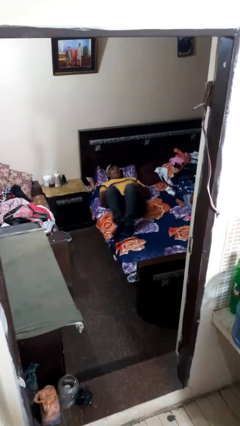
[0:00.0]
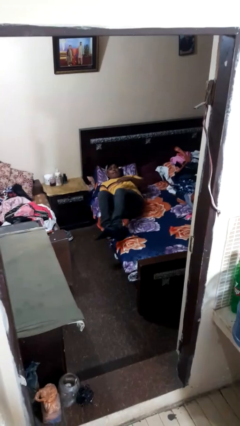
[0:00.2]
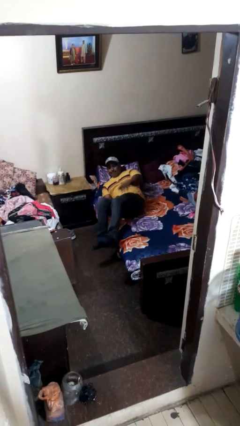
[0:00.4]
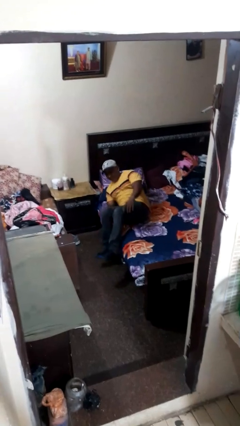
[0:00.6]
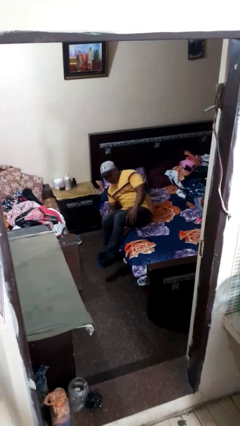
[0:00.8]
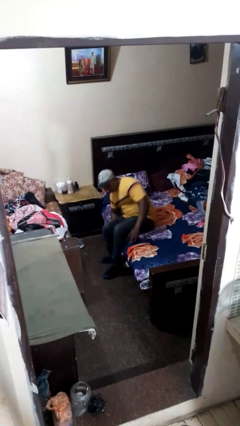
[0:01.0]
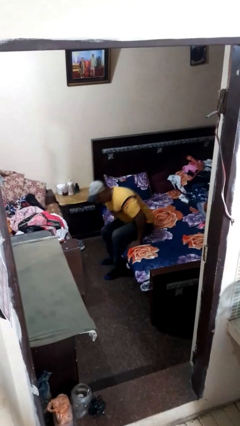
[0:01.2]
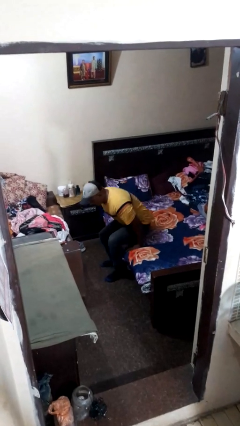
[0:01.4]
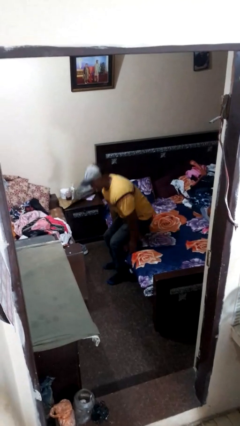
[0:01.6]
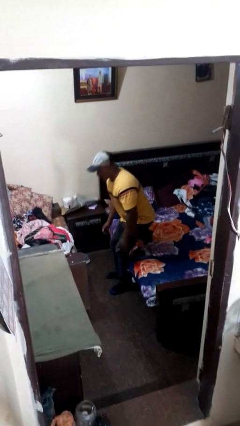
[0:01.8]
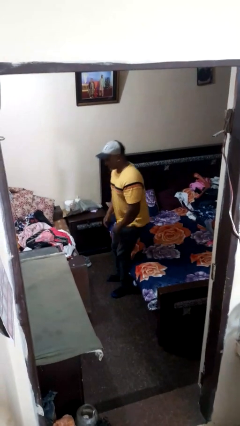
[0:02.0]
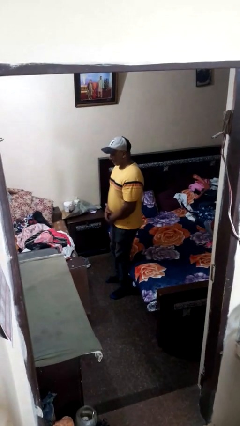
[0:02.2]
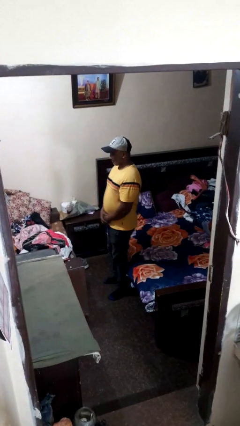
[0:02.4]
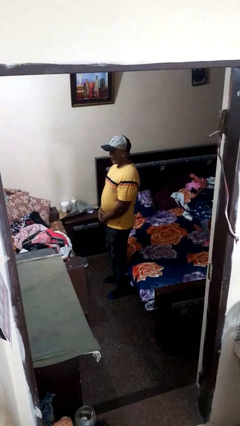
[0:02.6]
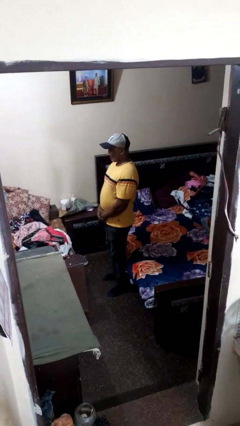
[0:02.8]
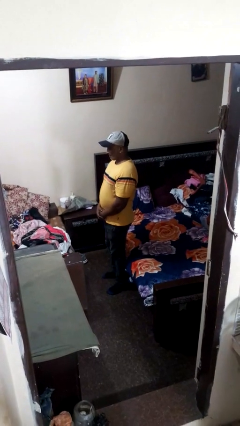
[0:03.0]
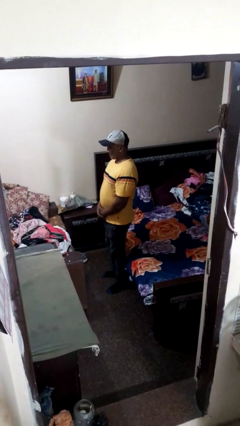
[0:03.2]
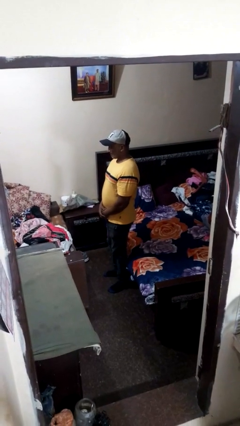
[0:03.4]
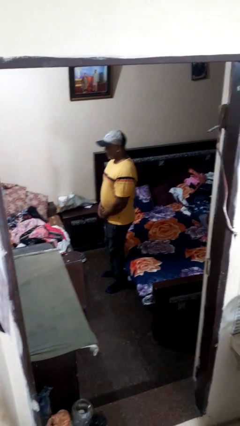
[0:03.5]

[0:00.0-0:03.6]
person stands up

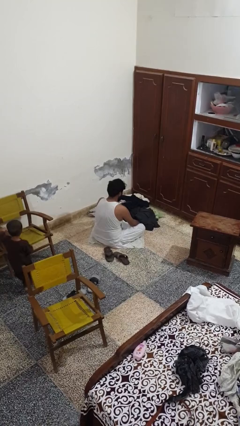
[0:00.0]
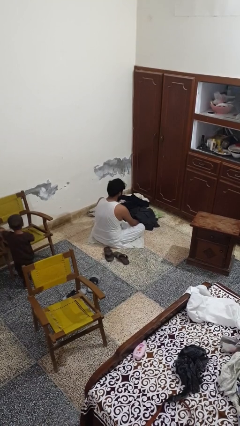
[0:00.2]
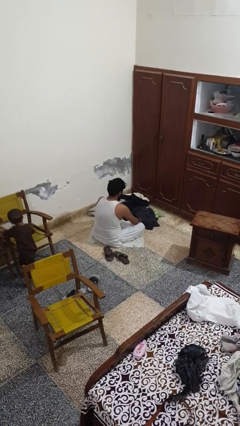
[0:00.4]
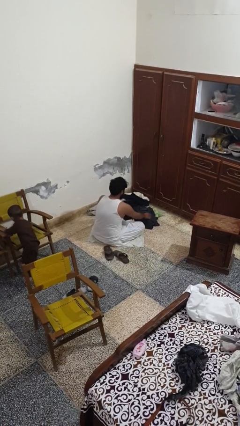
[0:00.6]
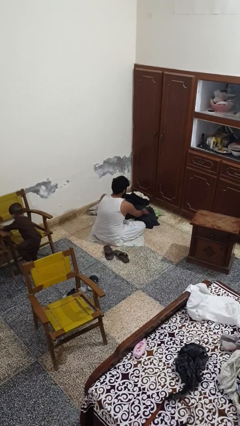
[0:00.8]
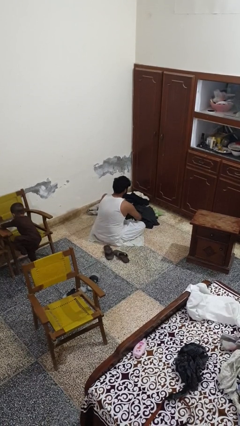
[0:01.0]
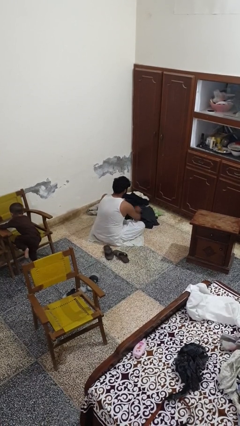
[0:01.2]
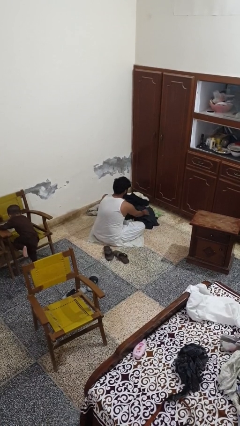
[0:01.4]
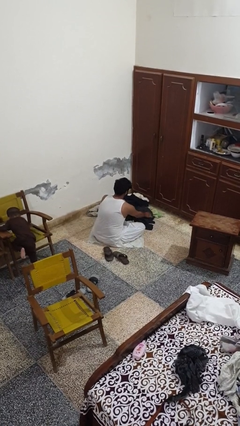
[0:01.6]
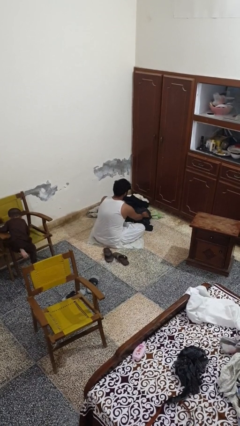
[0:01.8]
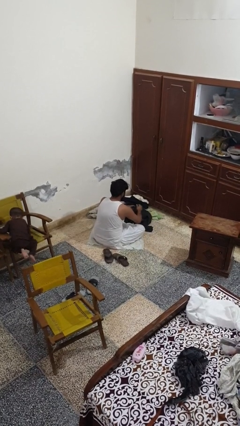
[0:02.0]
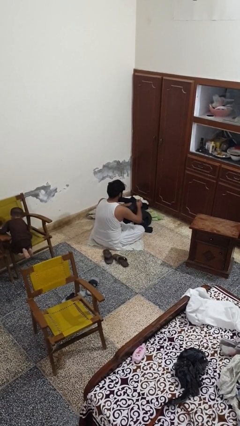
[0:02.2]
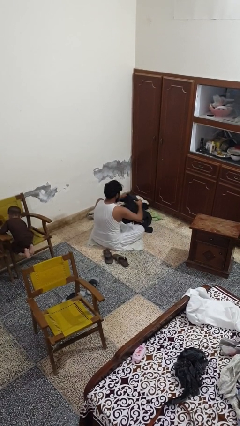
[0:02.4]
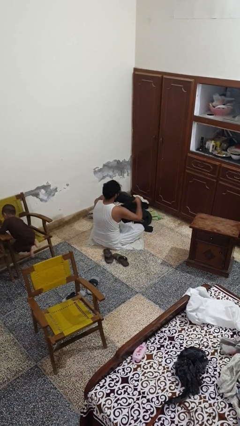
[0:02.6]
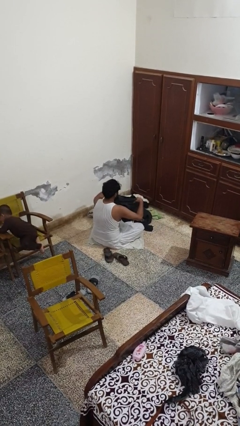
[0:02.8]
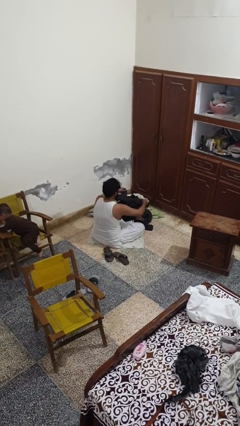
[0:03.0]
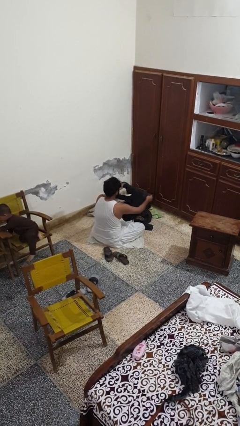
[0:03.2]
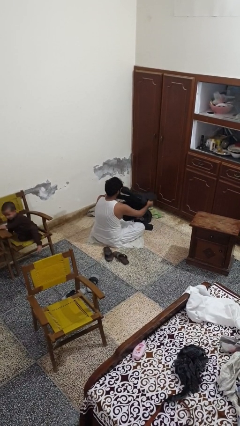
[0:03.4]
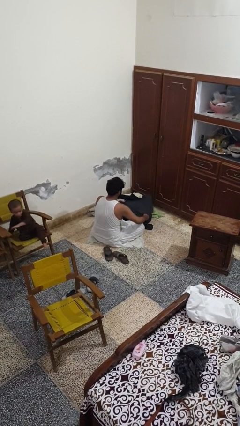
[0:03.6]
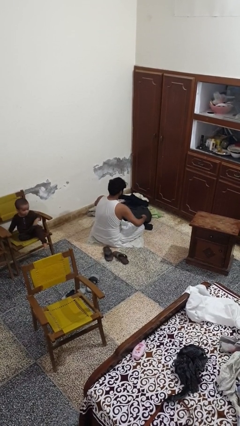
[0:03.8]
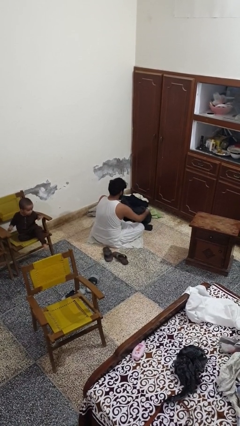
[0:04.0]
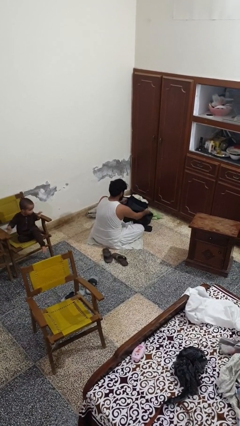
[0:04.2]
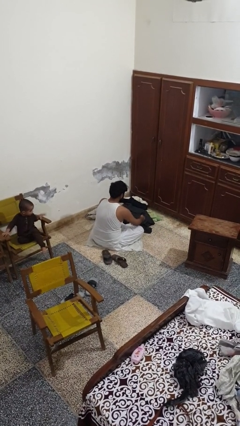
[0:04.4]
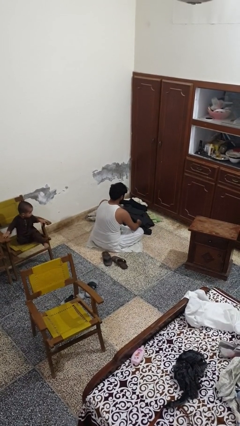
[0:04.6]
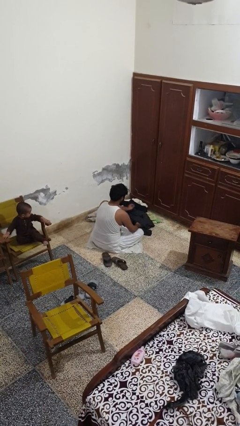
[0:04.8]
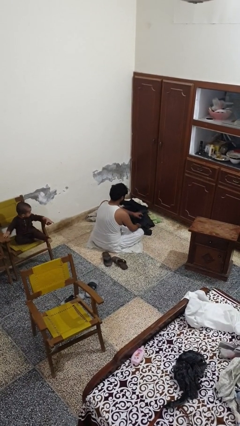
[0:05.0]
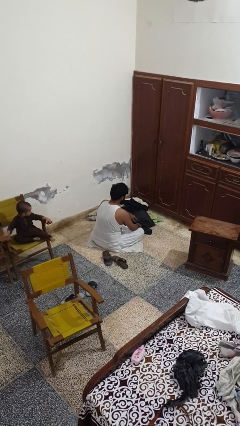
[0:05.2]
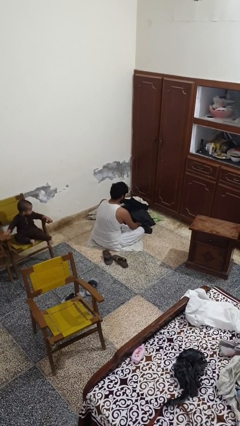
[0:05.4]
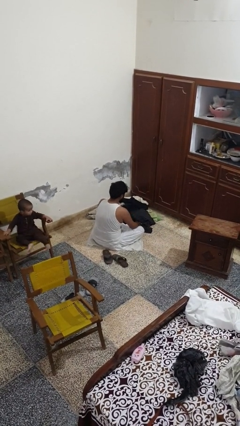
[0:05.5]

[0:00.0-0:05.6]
person folds shirt

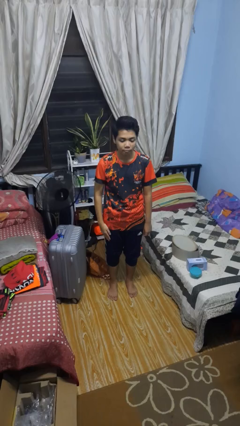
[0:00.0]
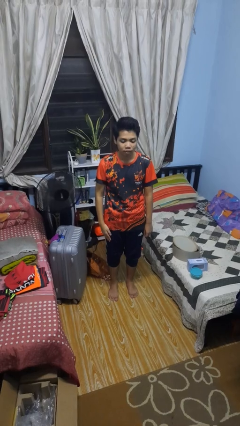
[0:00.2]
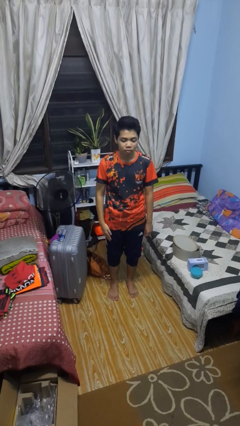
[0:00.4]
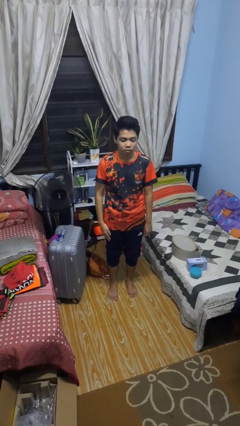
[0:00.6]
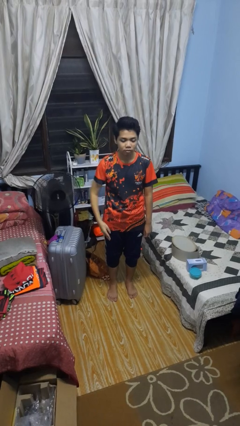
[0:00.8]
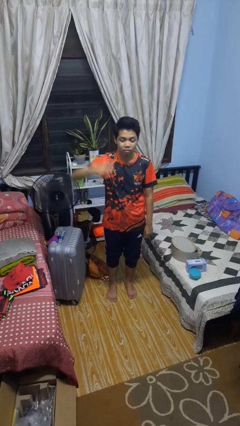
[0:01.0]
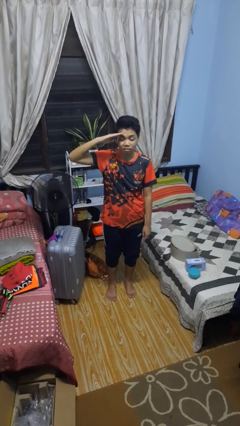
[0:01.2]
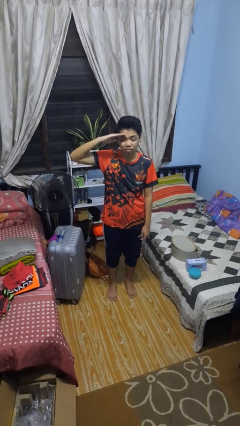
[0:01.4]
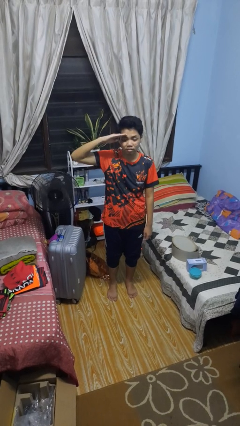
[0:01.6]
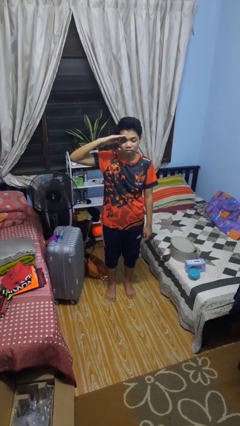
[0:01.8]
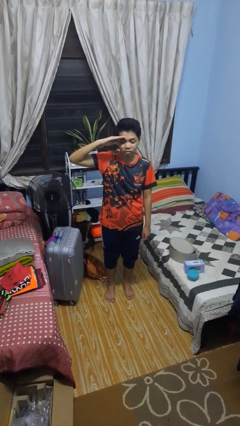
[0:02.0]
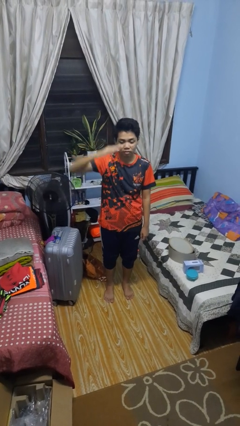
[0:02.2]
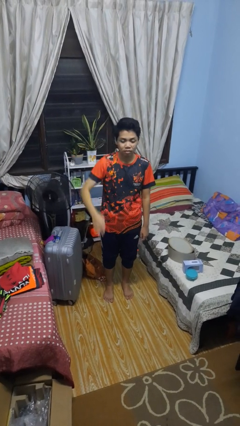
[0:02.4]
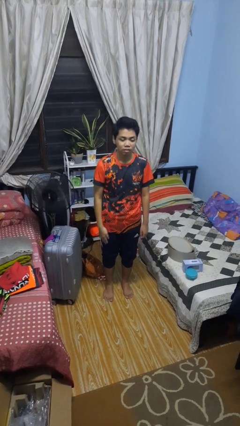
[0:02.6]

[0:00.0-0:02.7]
person salutes

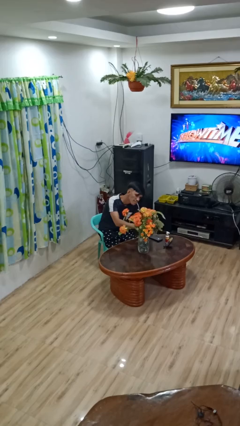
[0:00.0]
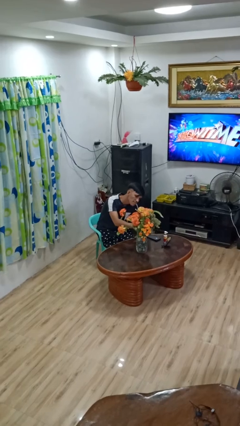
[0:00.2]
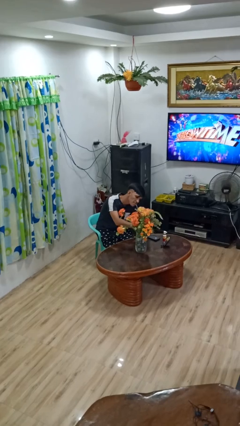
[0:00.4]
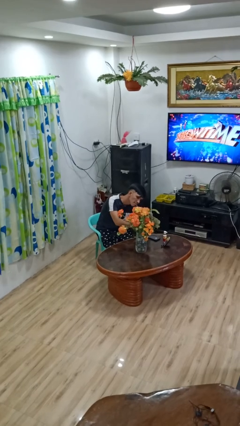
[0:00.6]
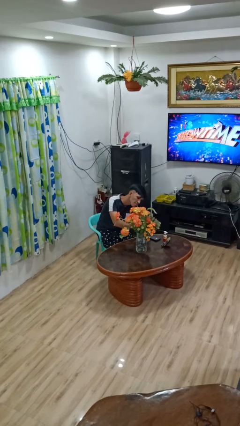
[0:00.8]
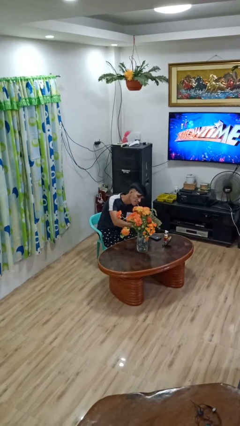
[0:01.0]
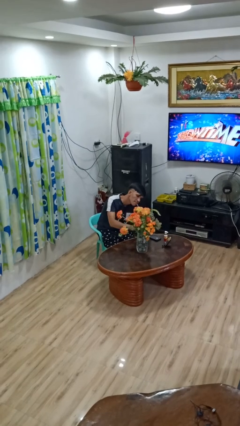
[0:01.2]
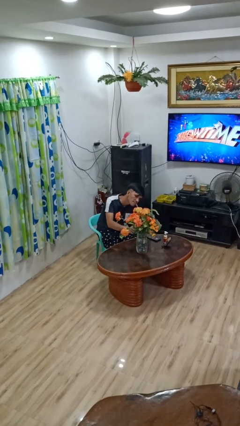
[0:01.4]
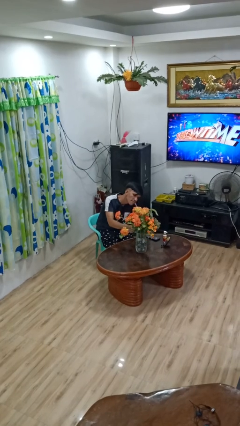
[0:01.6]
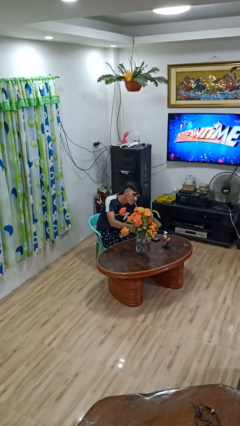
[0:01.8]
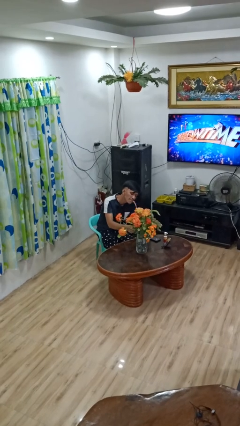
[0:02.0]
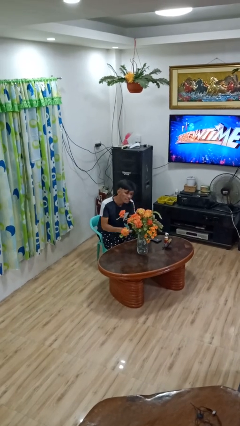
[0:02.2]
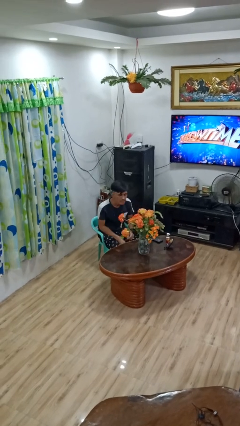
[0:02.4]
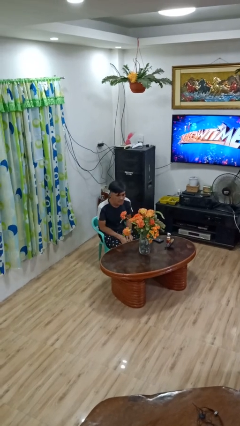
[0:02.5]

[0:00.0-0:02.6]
person arranges flowers in vase

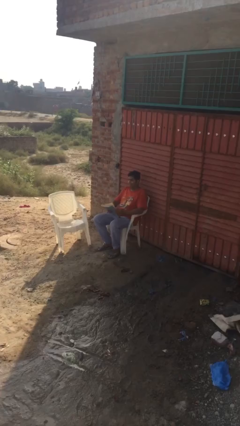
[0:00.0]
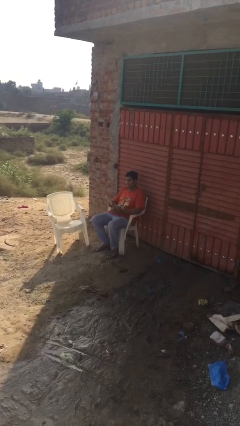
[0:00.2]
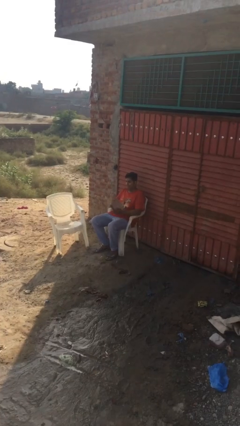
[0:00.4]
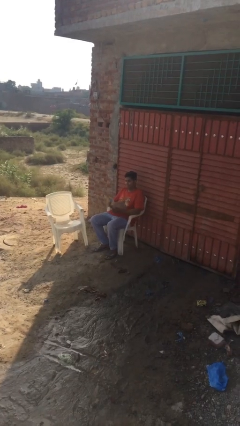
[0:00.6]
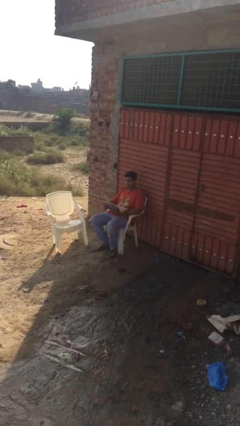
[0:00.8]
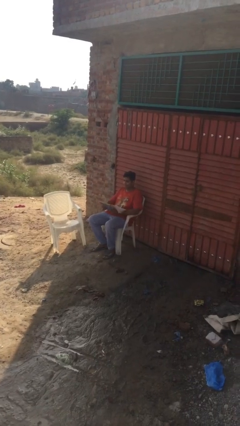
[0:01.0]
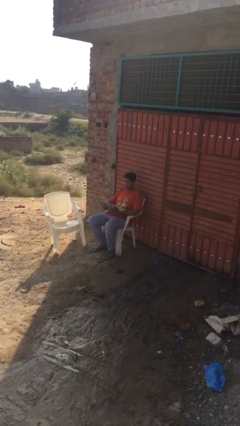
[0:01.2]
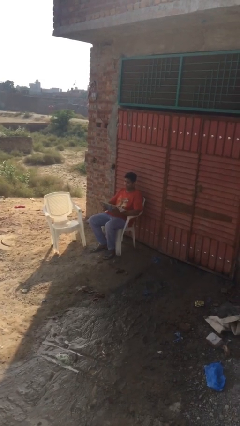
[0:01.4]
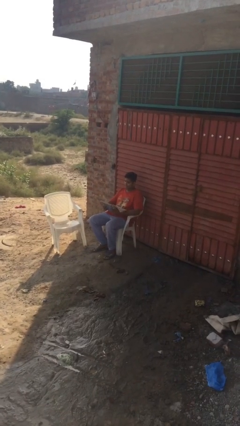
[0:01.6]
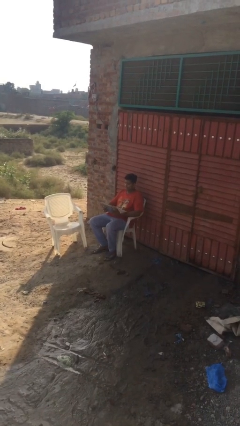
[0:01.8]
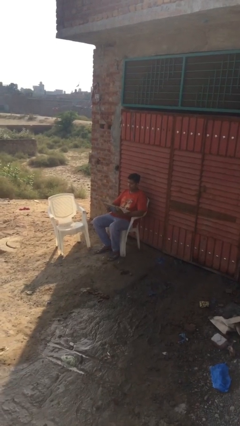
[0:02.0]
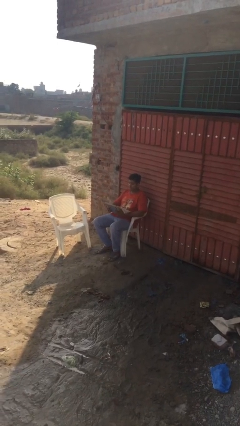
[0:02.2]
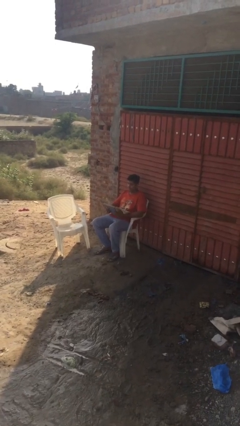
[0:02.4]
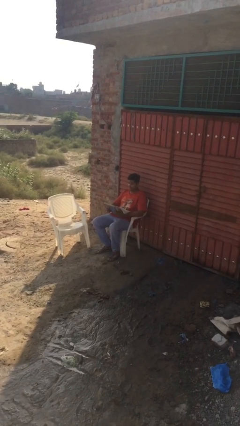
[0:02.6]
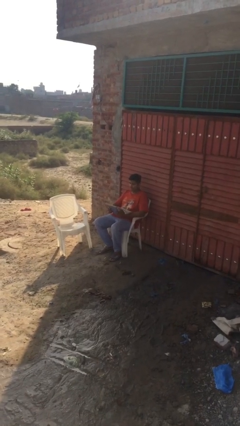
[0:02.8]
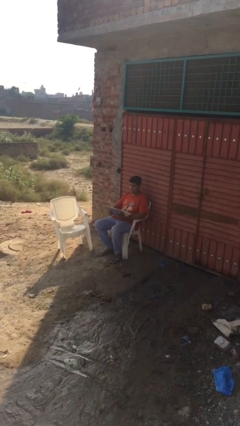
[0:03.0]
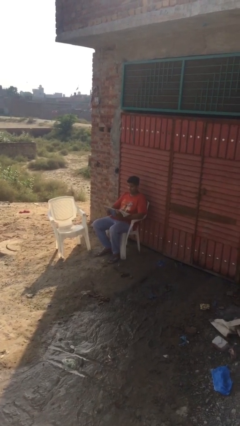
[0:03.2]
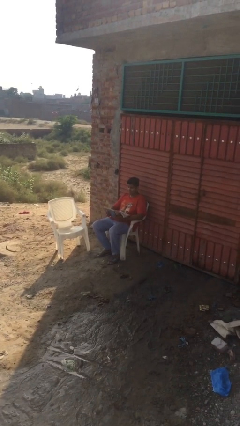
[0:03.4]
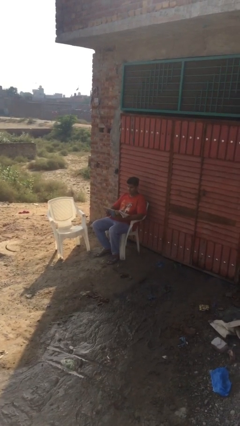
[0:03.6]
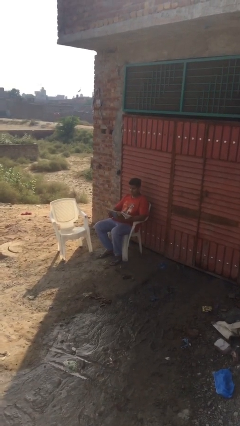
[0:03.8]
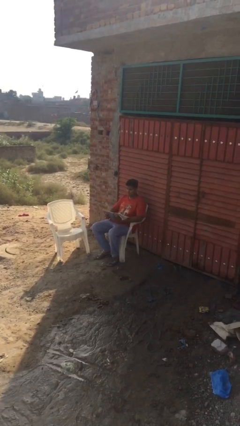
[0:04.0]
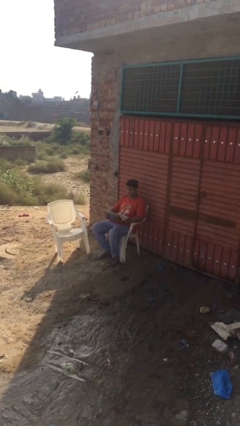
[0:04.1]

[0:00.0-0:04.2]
person reads document
